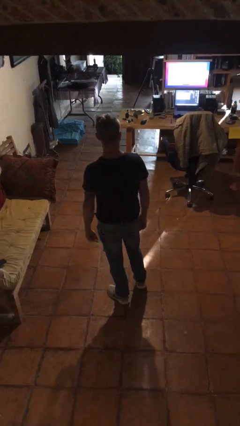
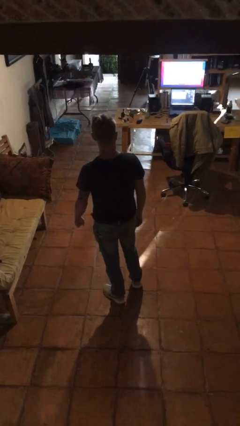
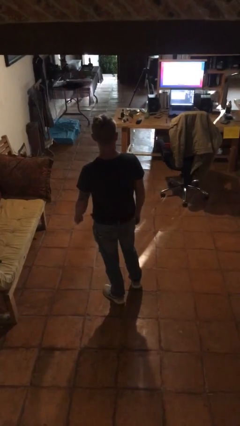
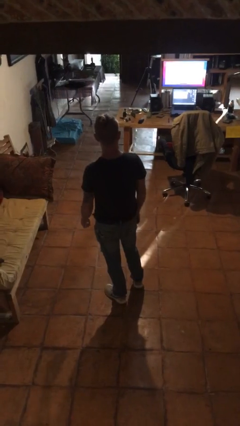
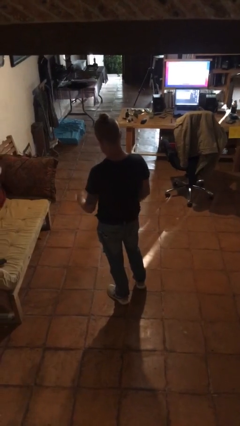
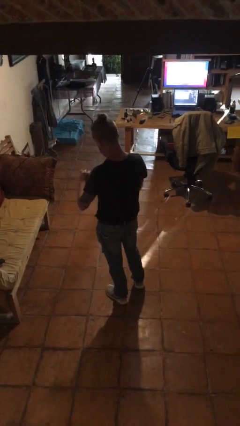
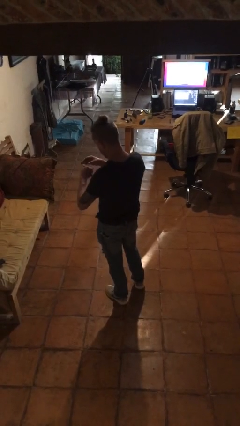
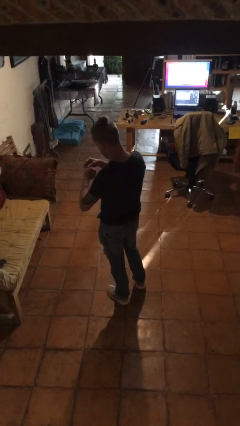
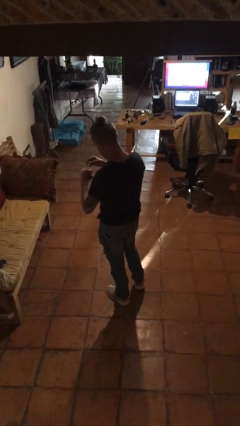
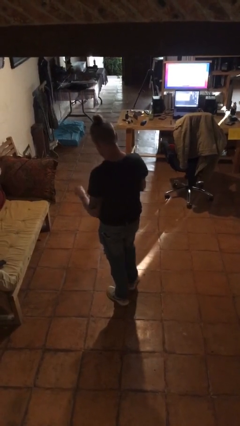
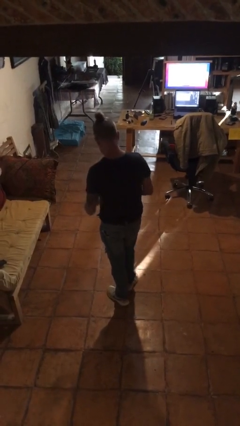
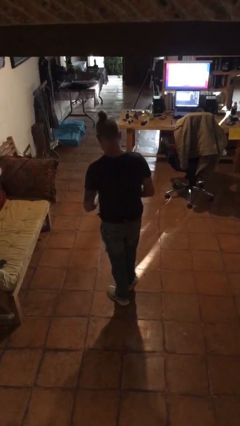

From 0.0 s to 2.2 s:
person takes off ring

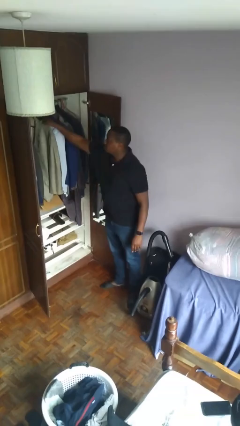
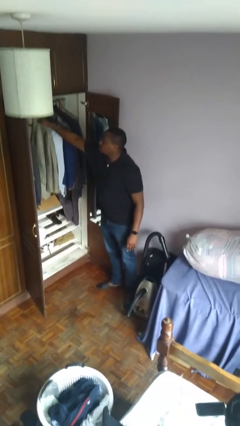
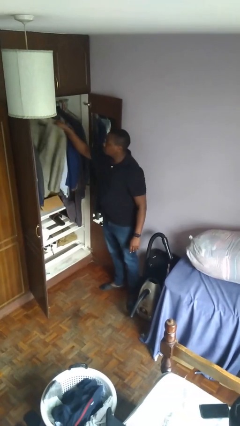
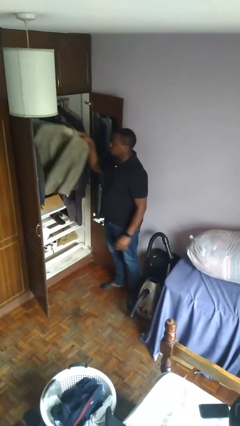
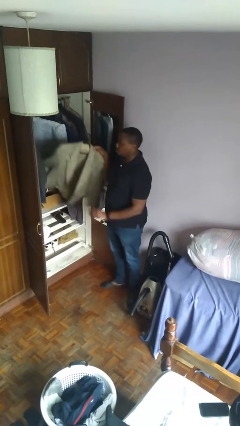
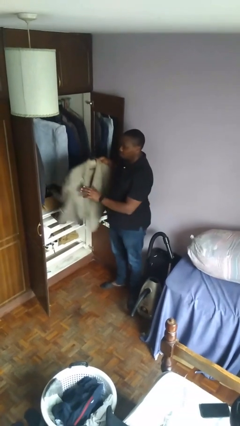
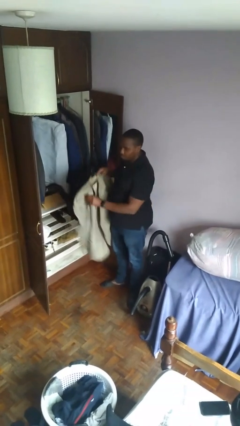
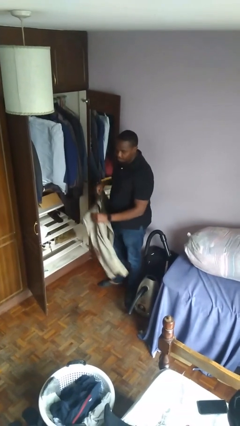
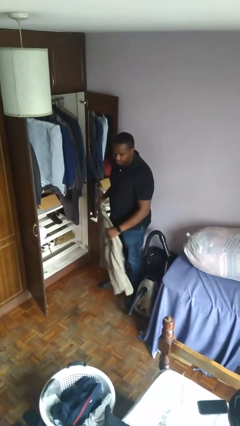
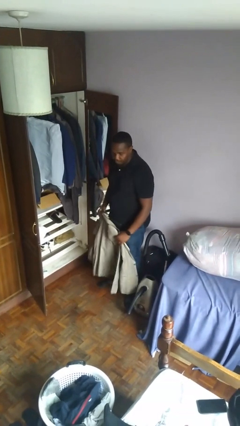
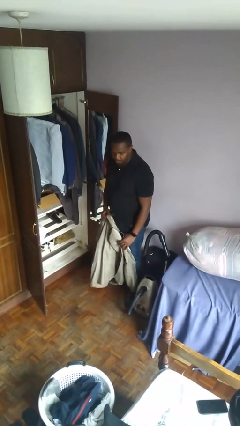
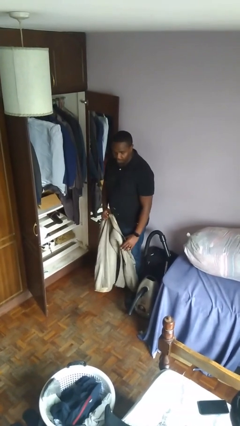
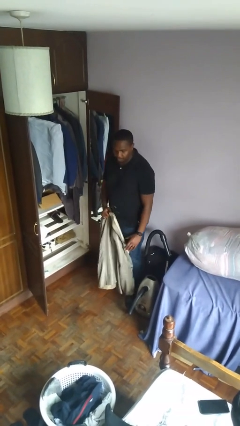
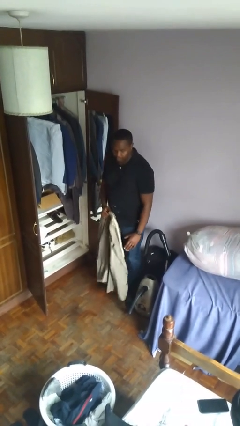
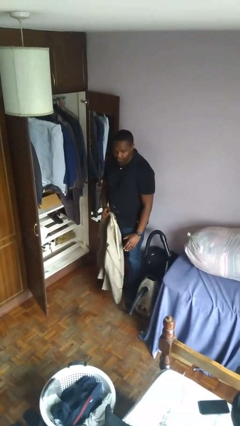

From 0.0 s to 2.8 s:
person takes clothes from closet

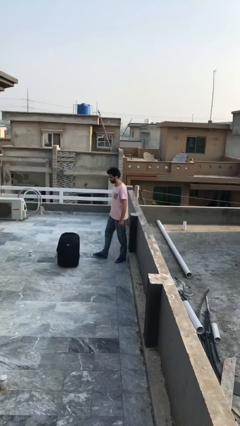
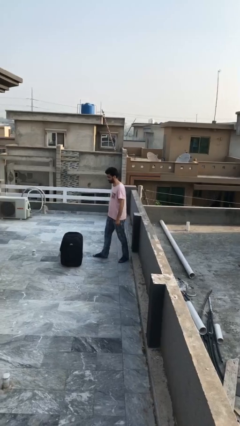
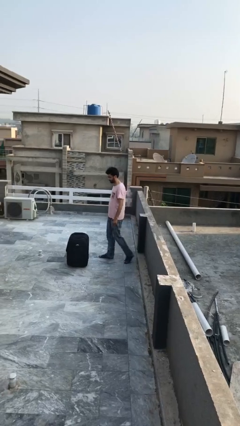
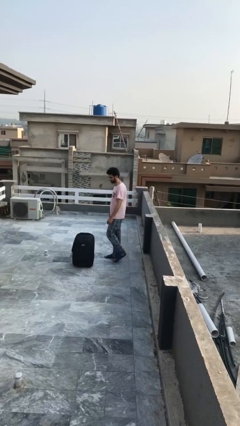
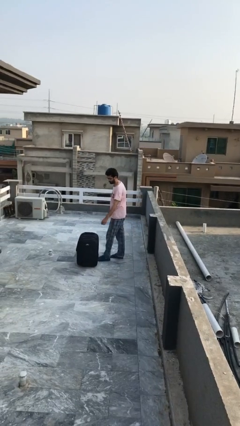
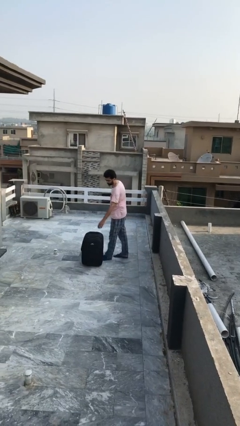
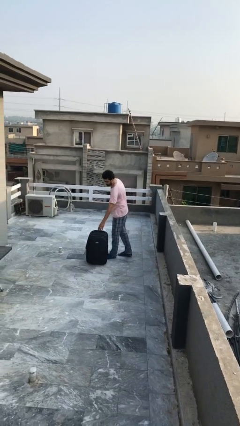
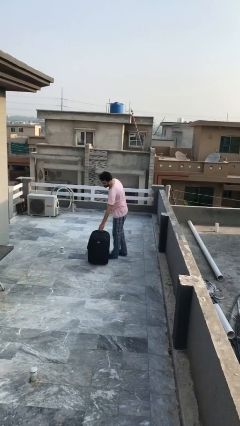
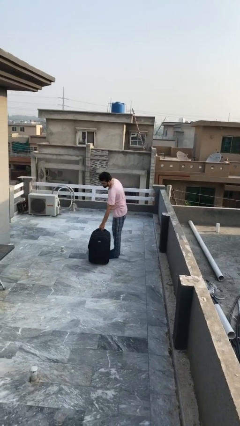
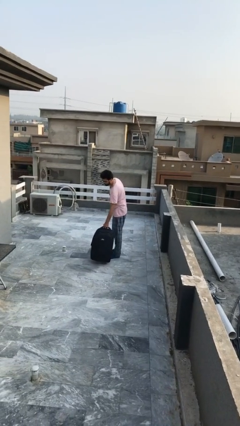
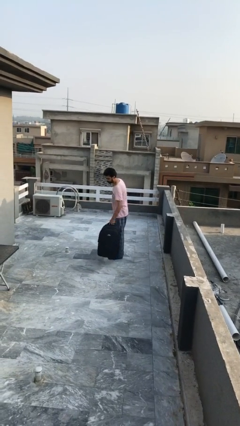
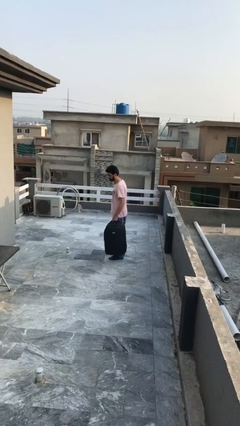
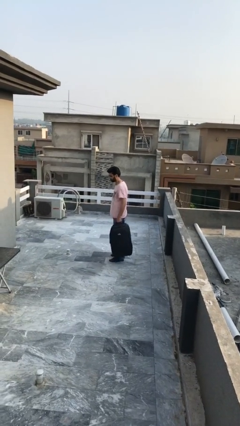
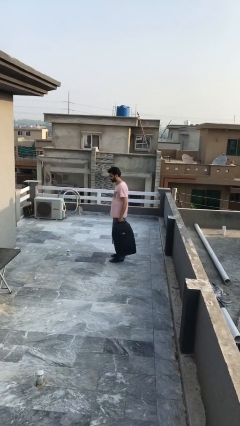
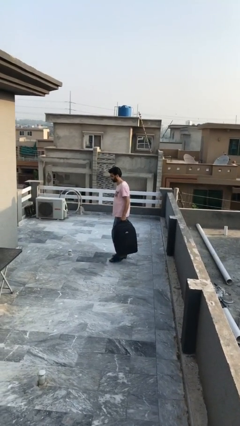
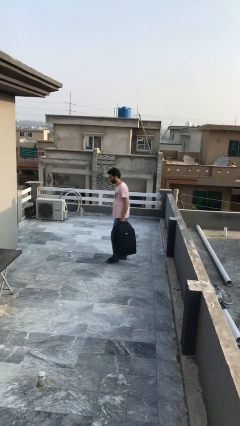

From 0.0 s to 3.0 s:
person picks up object from floor

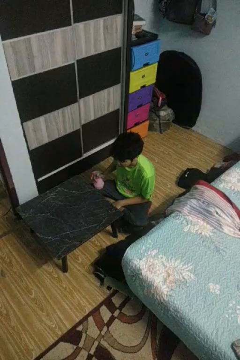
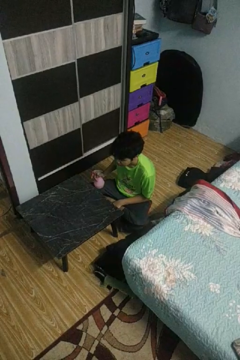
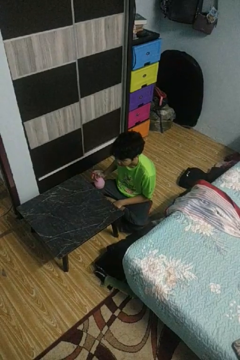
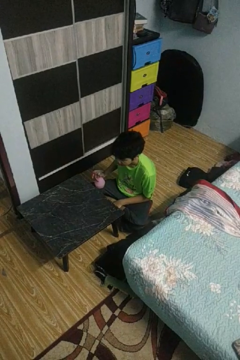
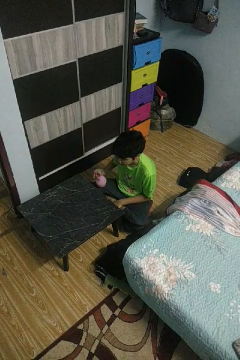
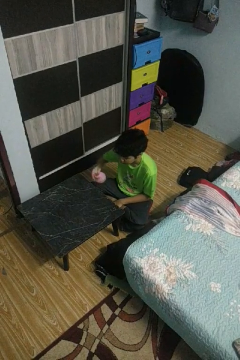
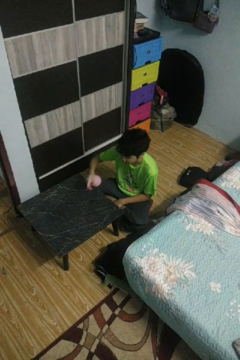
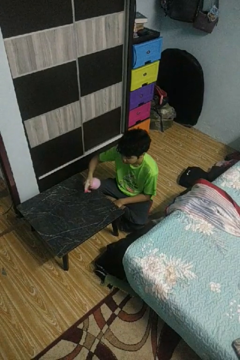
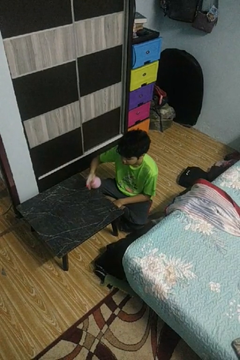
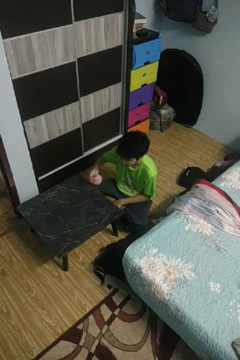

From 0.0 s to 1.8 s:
person sprays from bottle

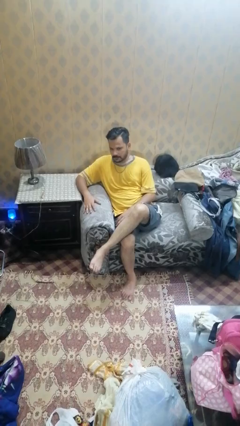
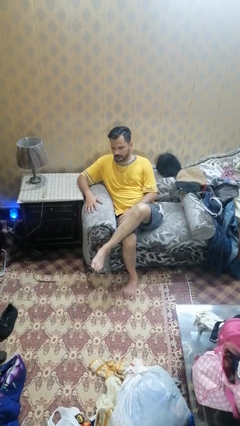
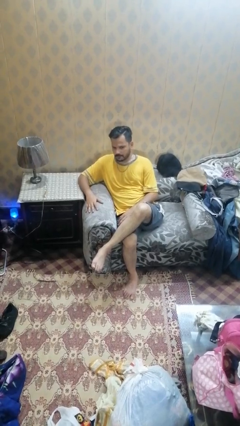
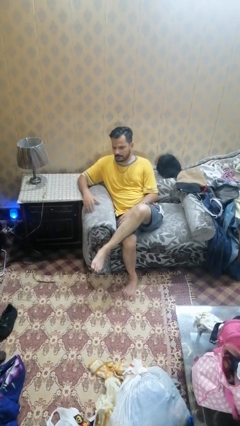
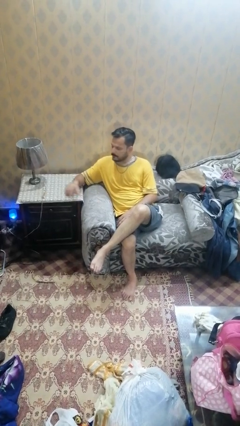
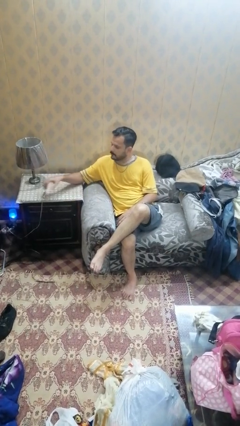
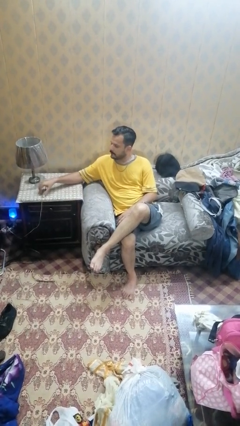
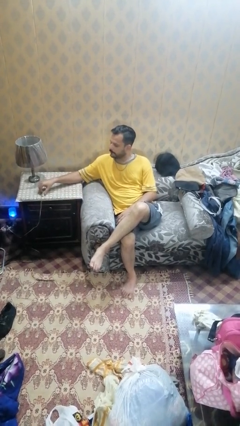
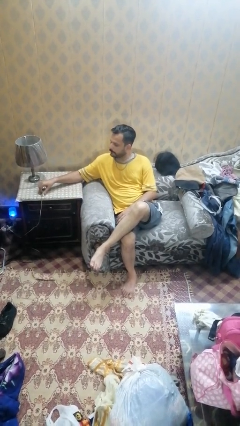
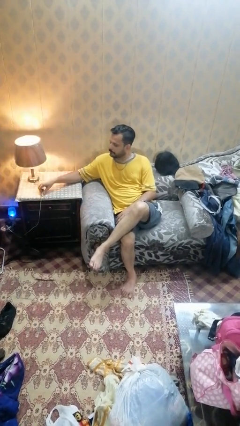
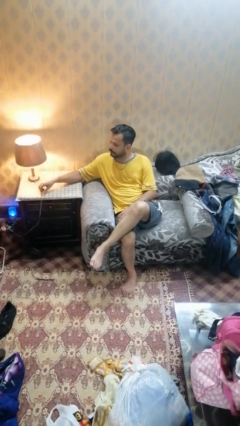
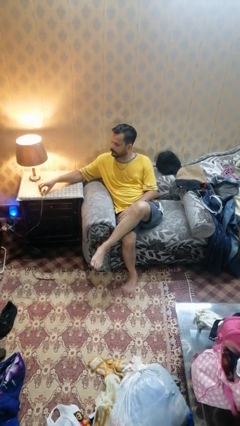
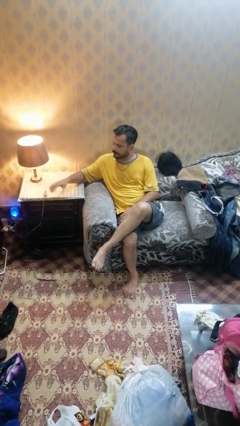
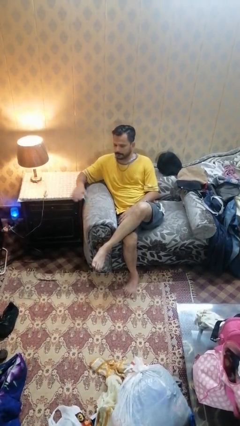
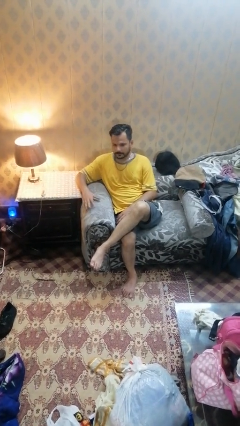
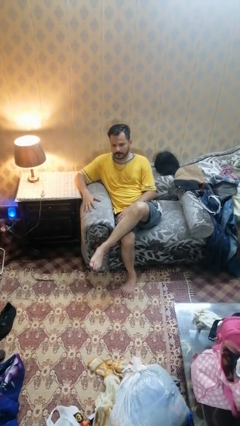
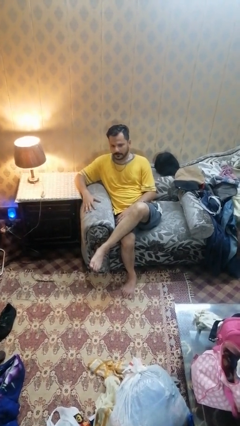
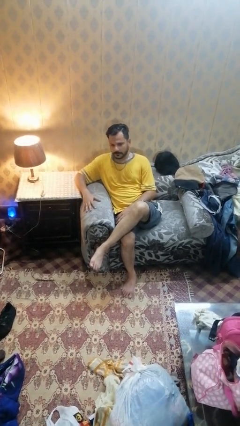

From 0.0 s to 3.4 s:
person turns on lamp

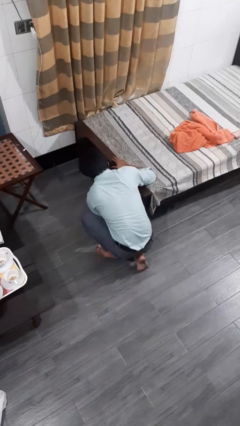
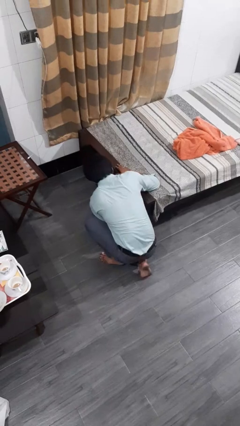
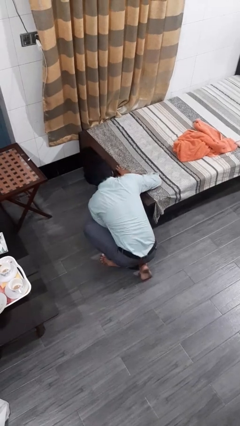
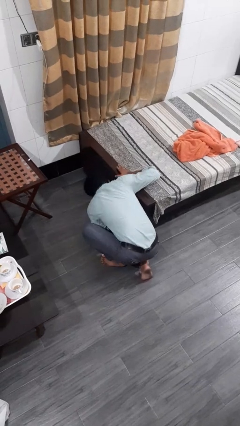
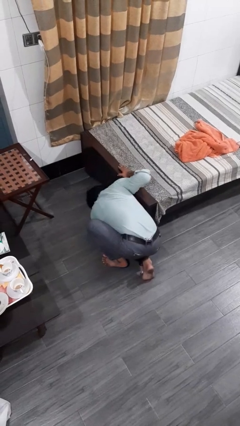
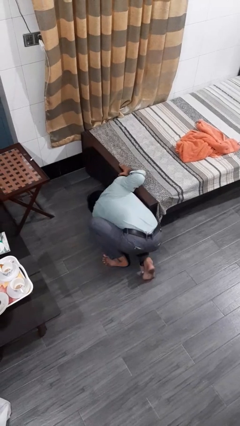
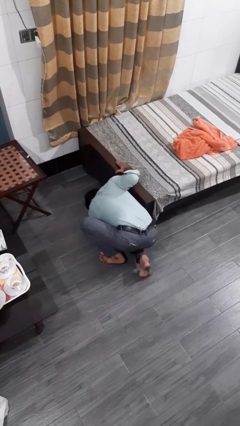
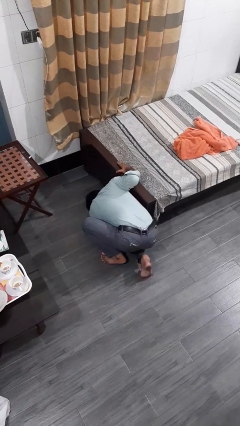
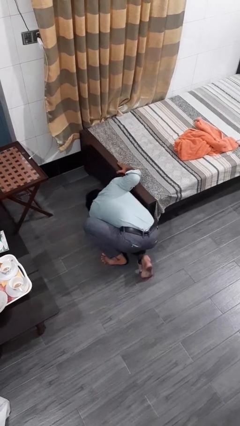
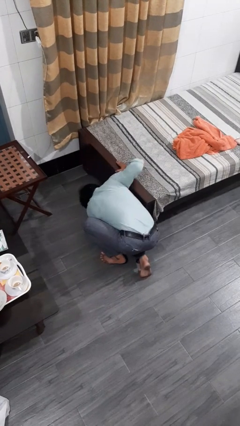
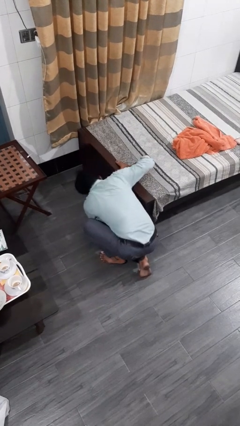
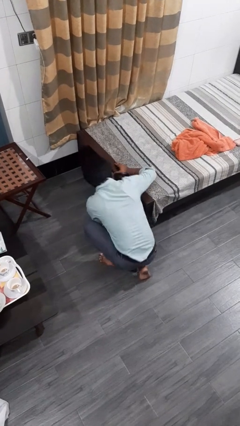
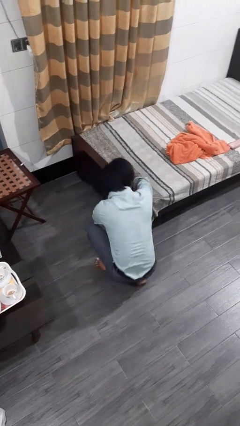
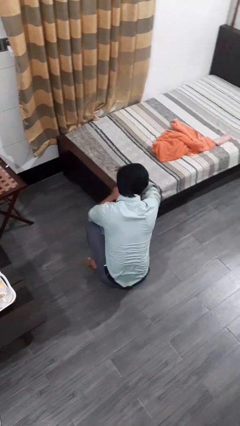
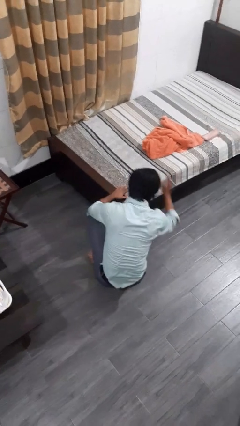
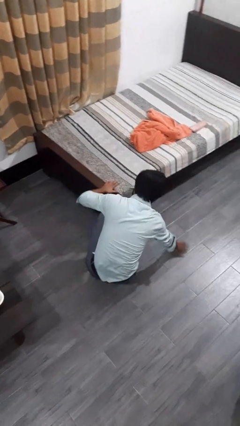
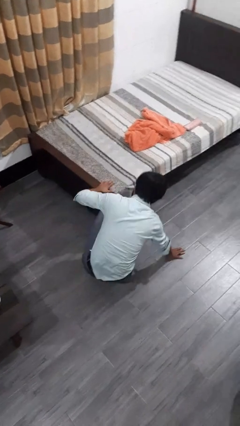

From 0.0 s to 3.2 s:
person searches under bed

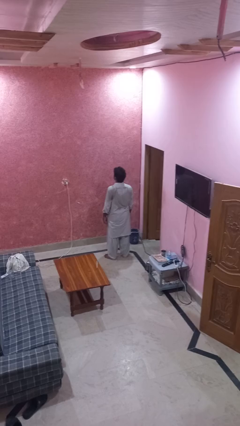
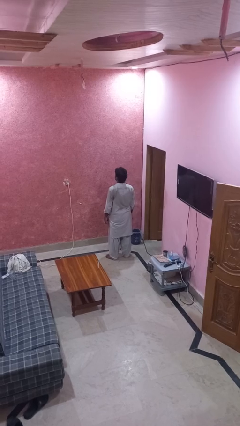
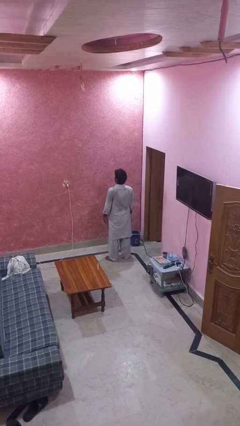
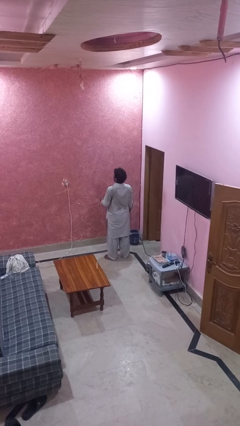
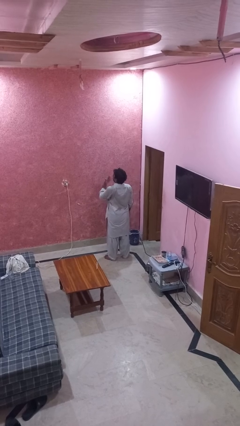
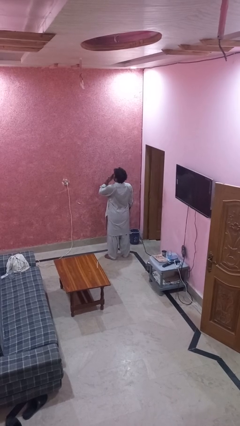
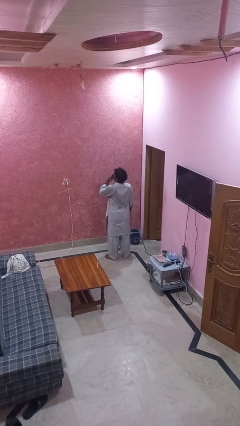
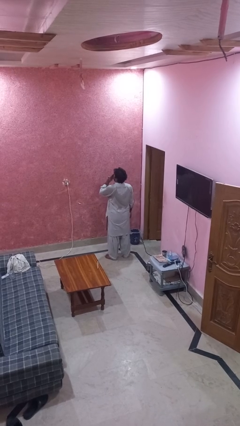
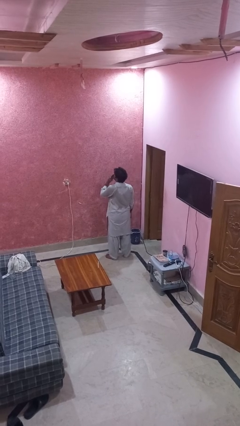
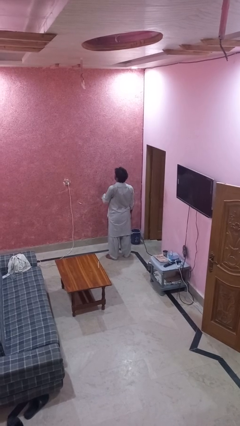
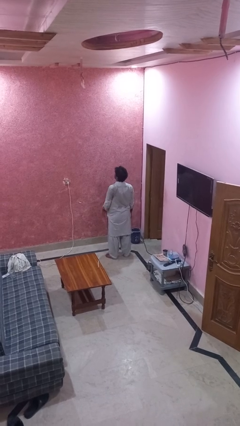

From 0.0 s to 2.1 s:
person yawns
